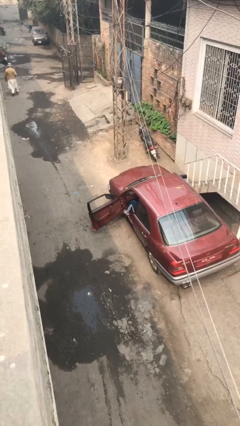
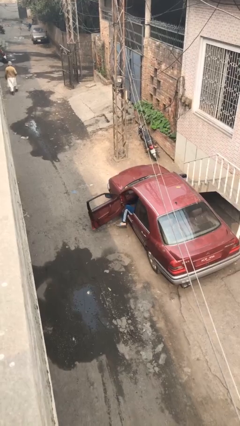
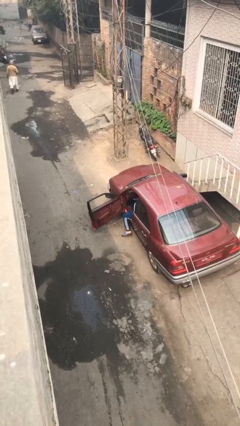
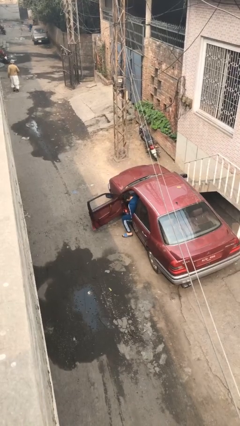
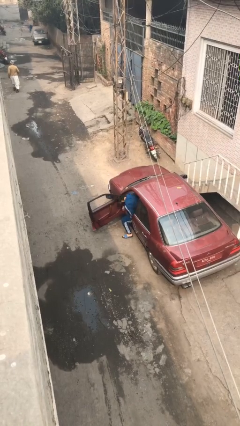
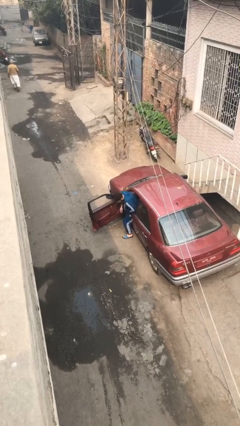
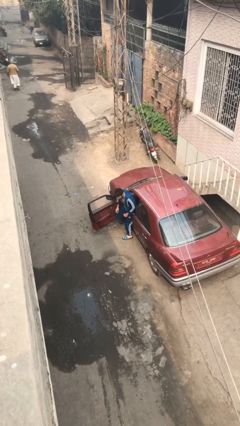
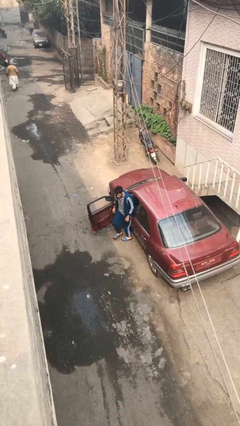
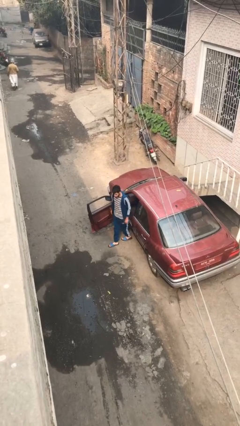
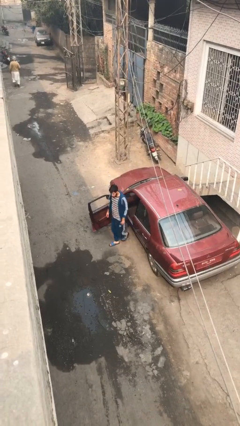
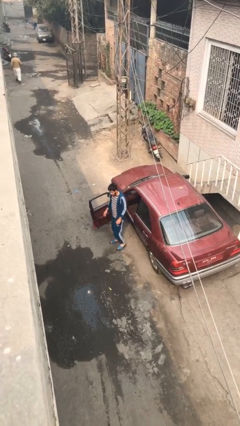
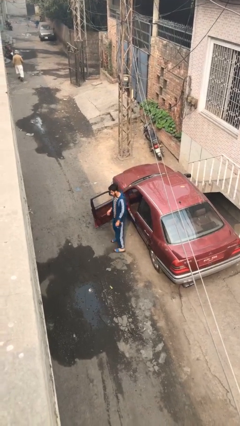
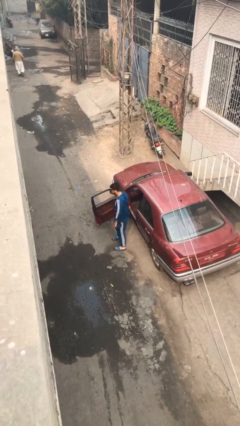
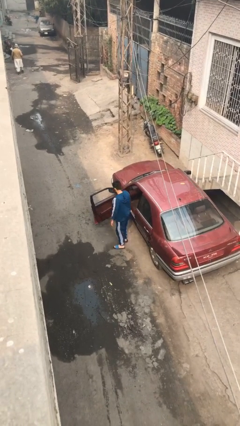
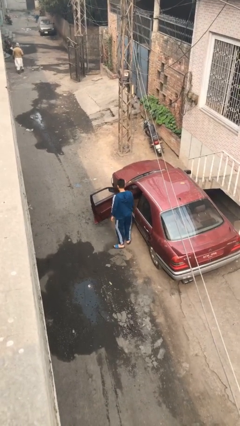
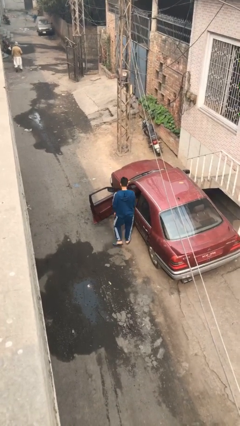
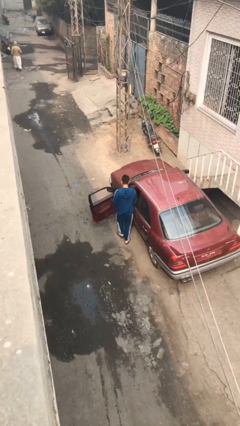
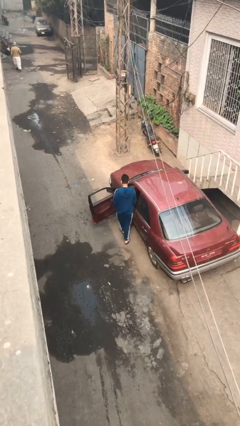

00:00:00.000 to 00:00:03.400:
person exits car

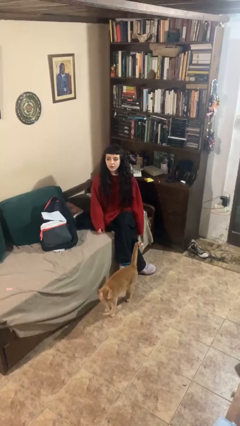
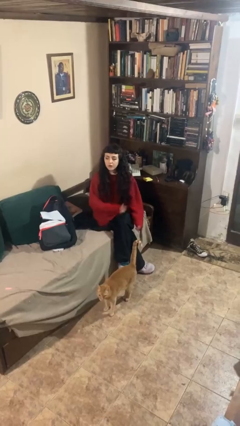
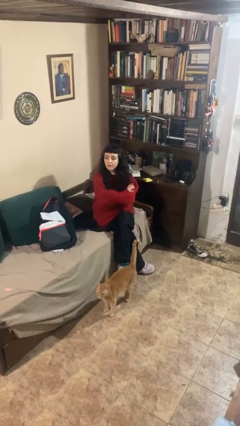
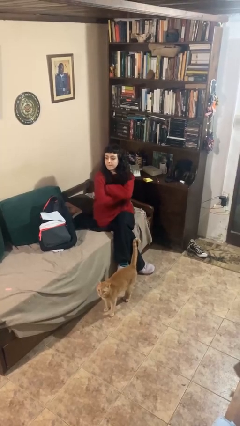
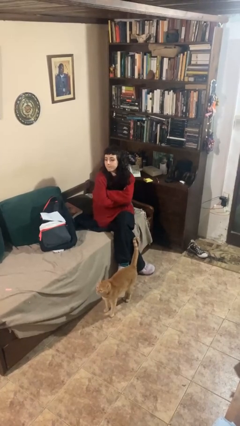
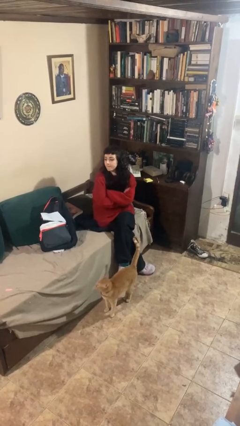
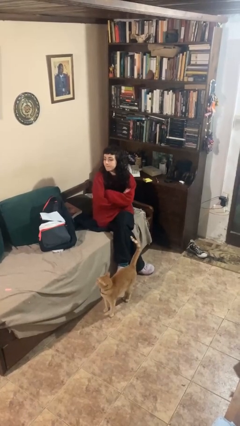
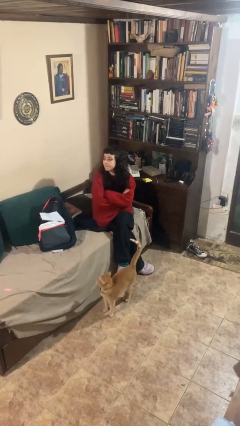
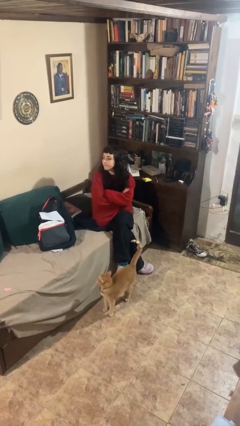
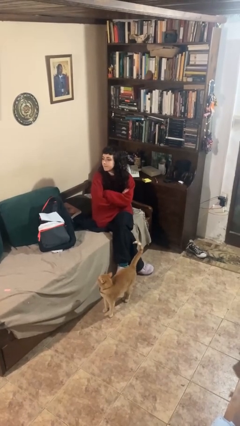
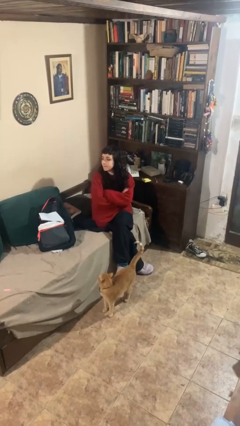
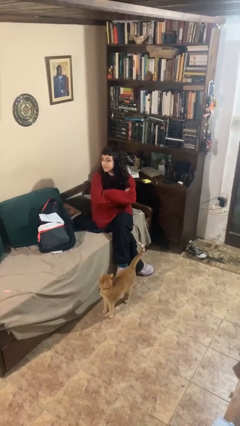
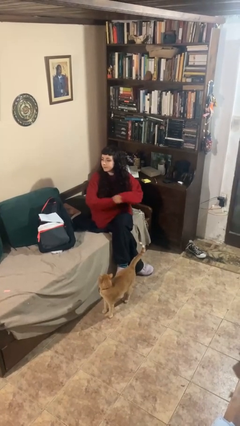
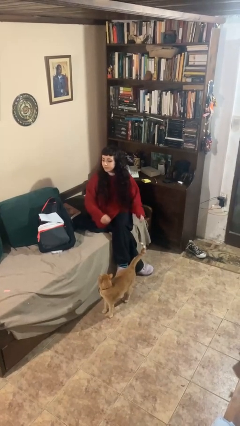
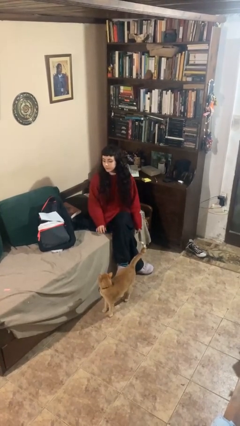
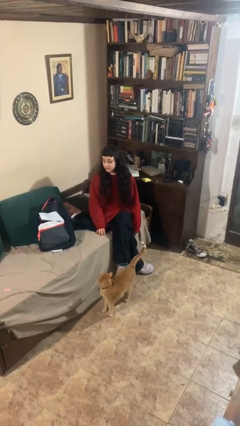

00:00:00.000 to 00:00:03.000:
person crosses arms

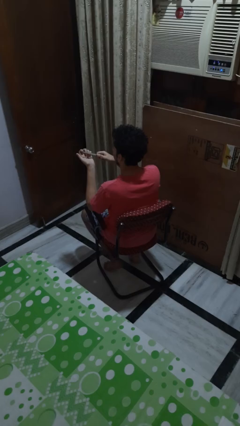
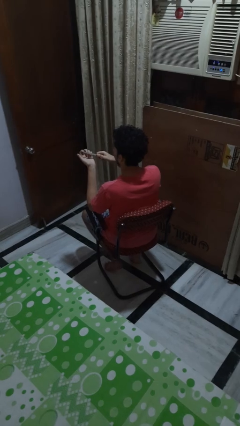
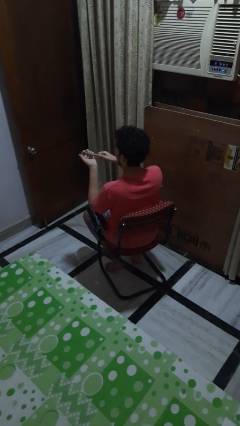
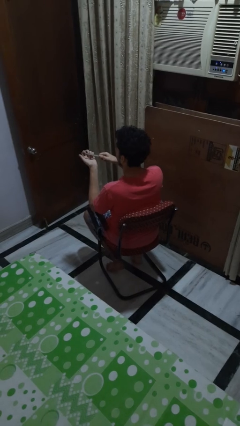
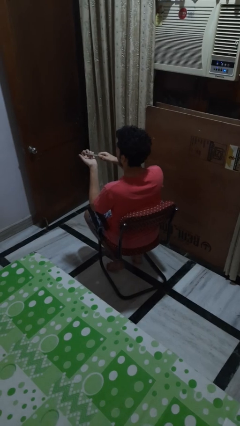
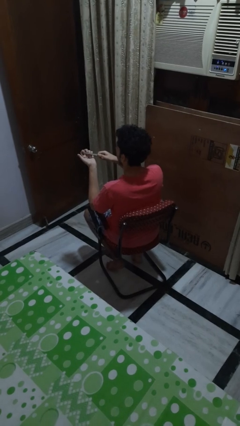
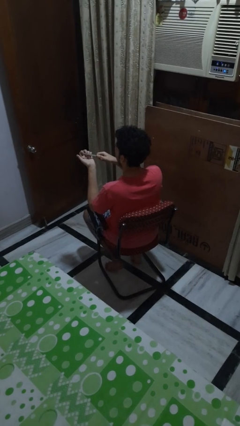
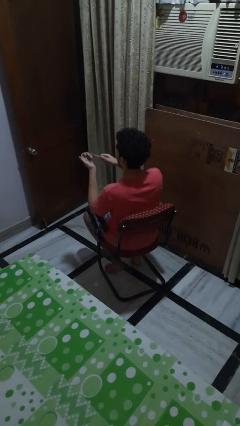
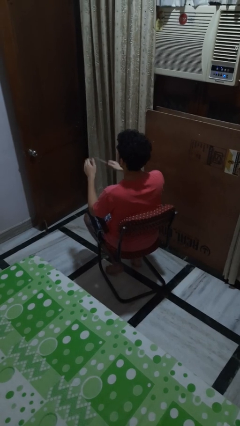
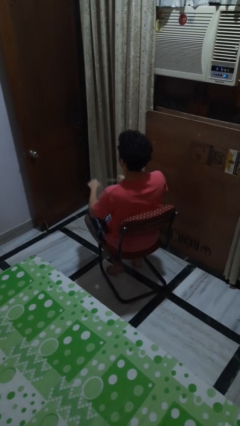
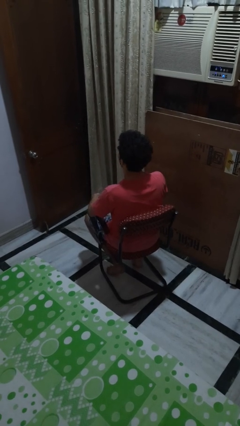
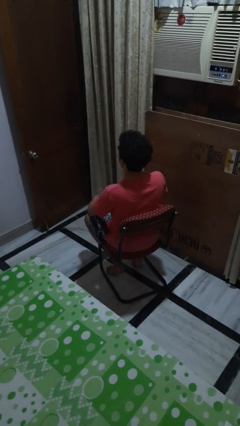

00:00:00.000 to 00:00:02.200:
person files fingernails

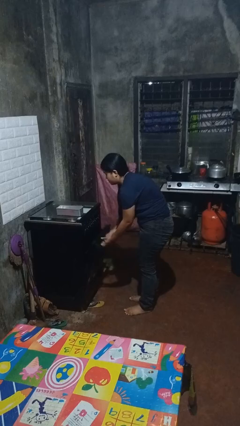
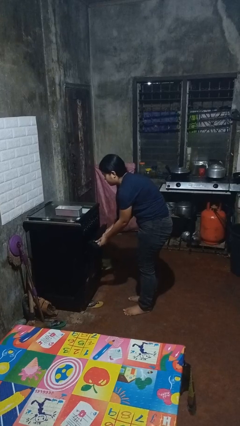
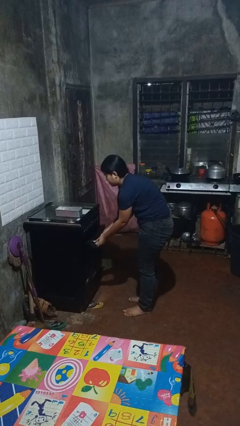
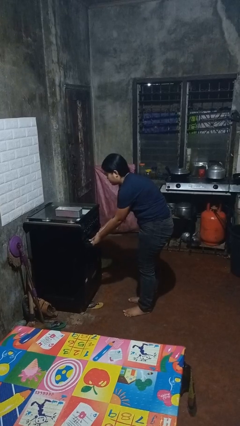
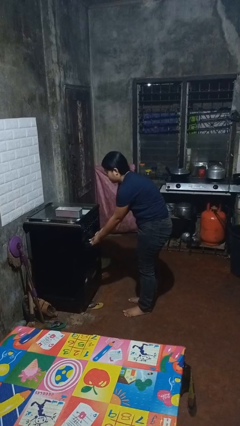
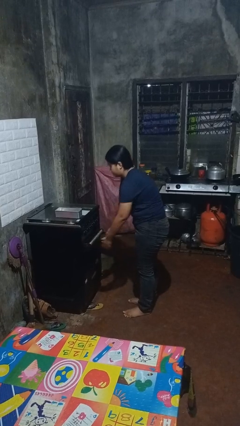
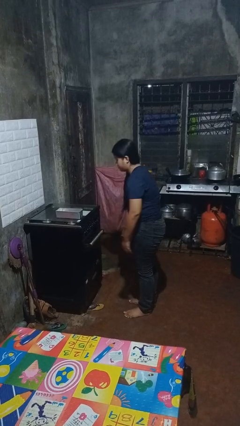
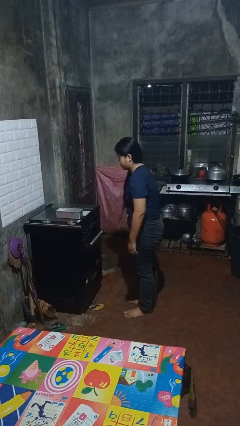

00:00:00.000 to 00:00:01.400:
person closes oven door

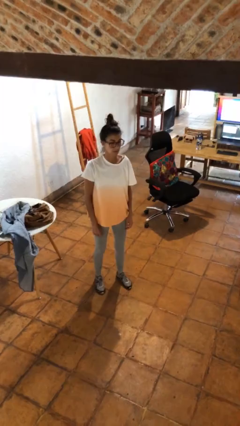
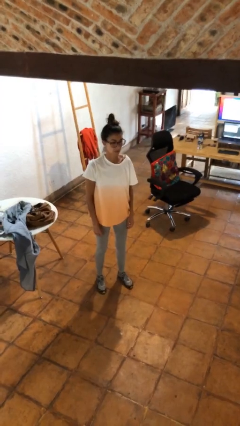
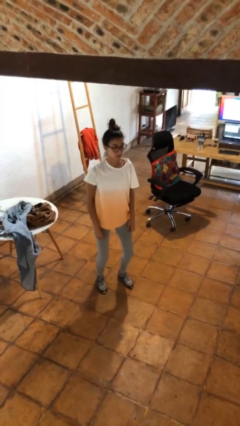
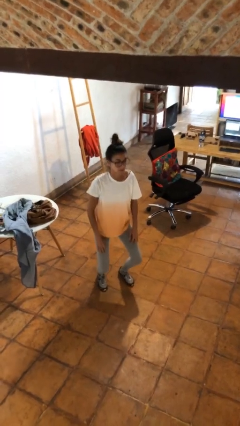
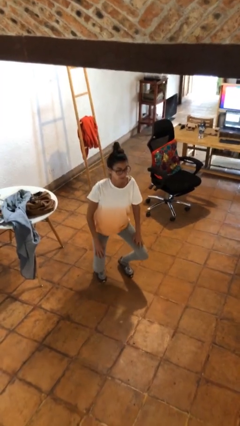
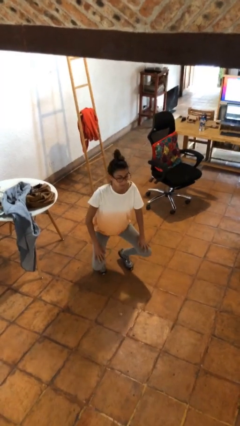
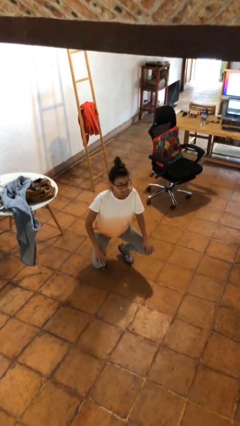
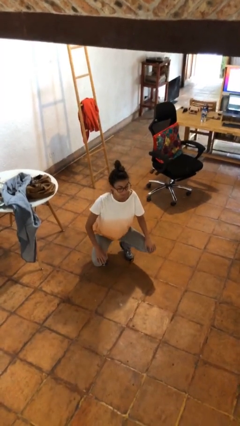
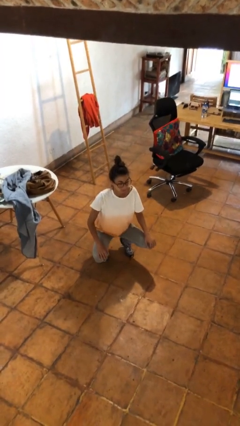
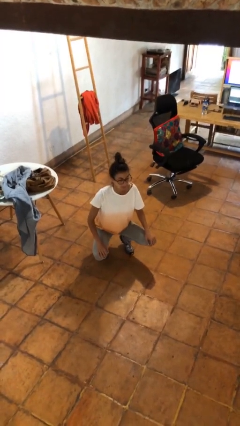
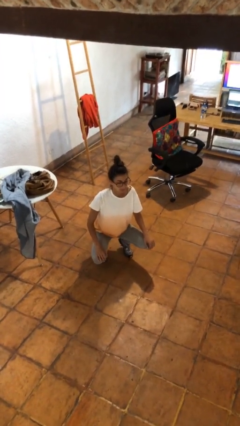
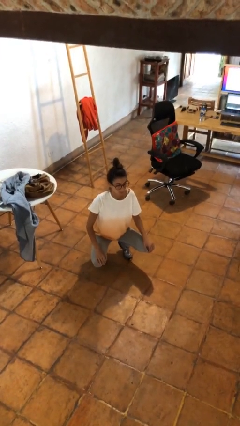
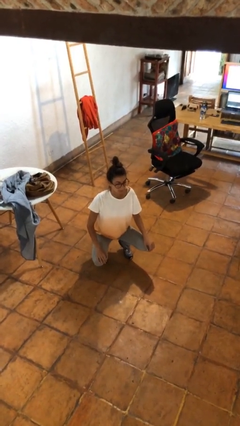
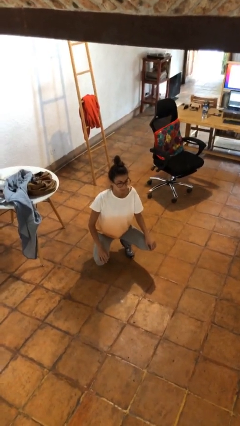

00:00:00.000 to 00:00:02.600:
person squats

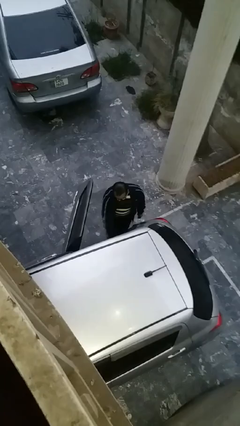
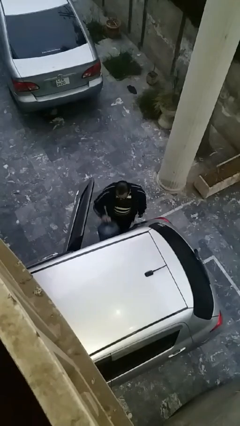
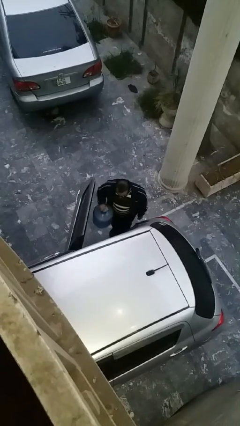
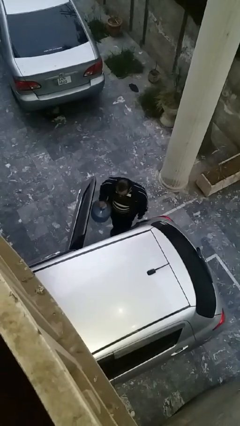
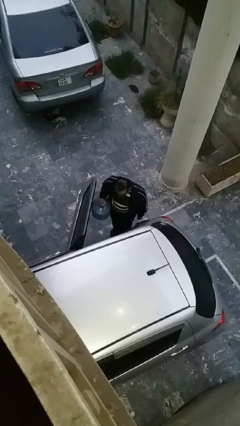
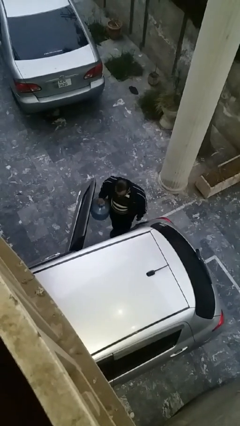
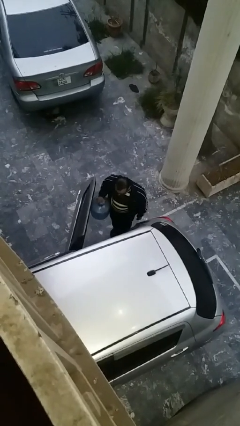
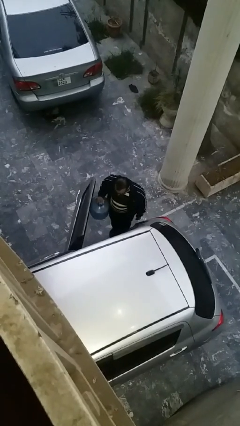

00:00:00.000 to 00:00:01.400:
person unloads car

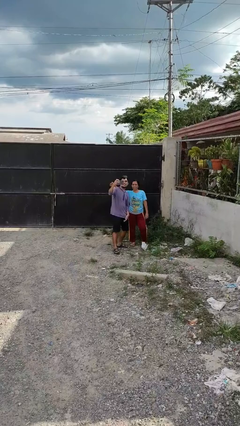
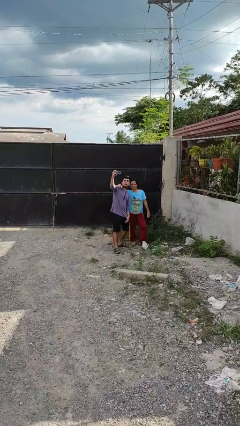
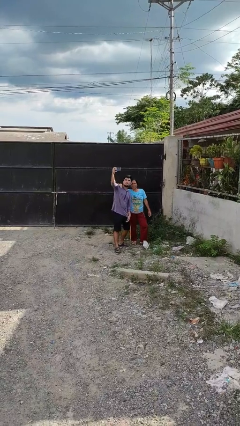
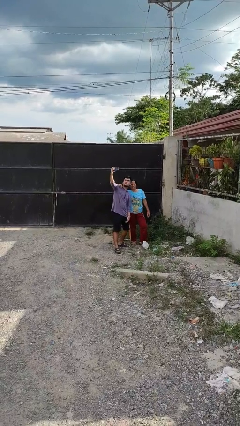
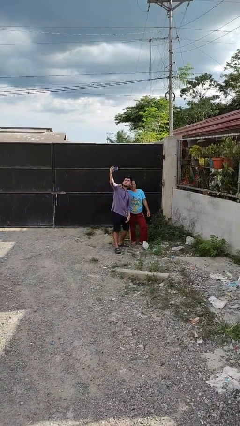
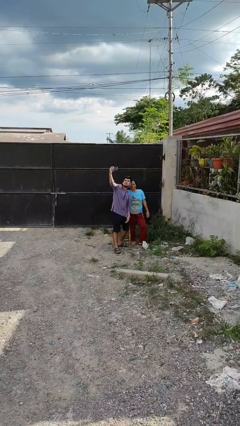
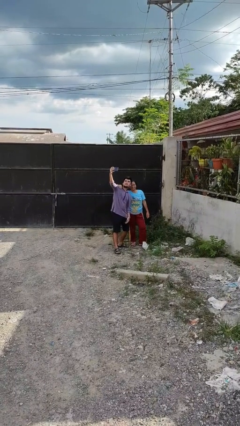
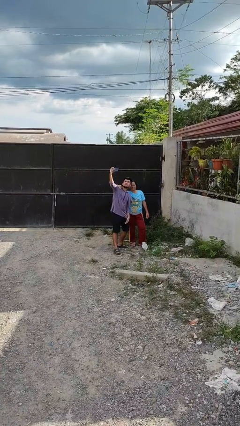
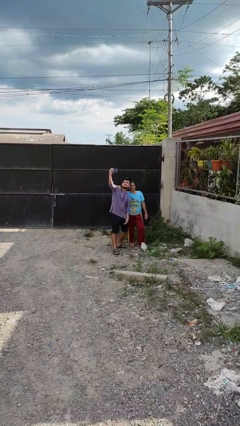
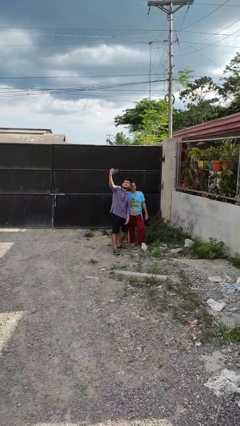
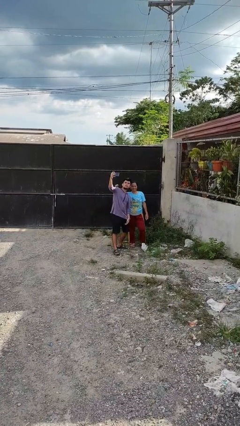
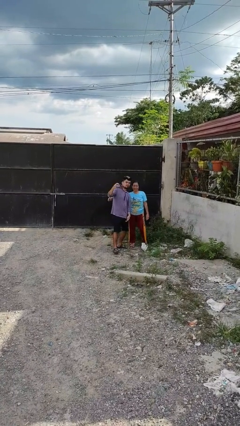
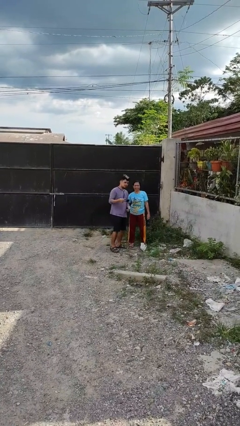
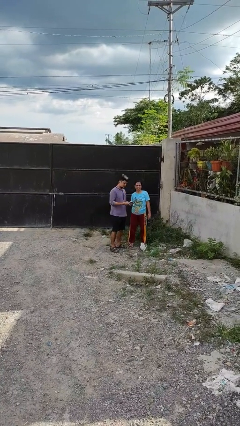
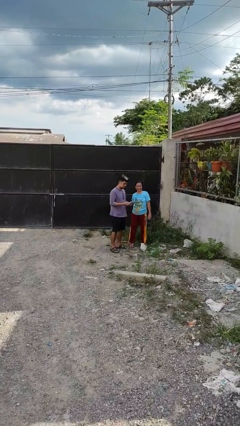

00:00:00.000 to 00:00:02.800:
person takes selfie with person

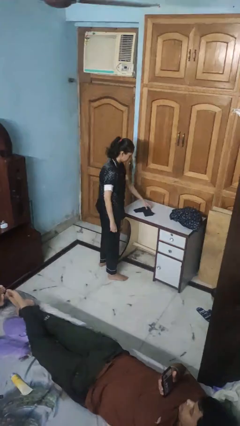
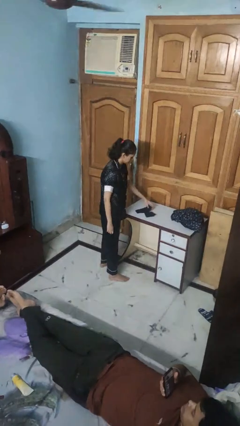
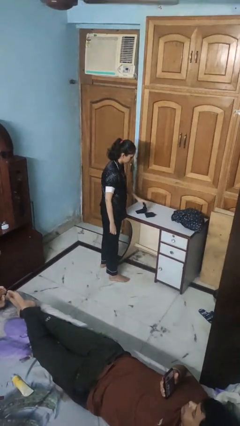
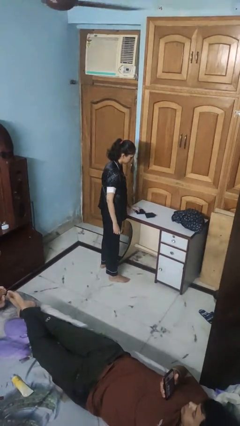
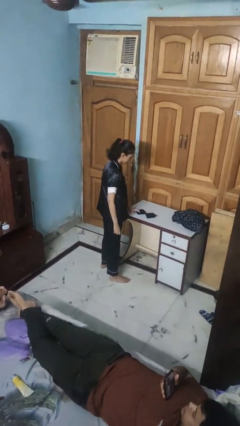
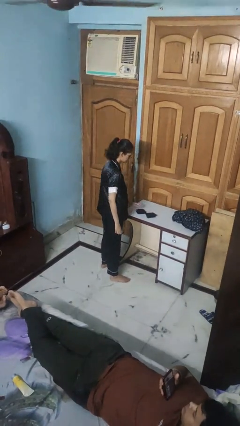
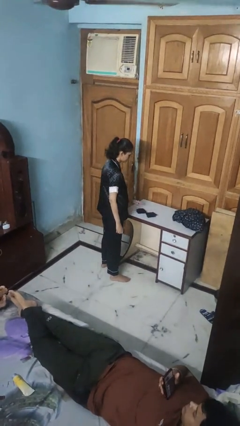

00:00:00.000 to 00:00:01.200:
person folds socks
